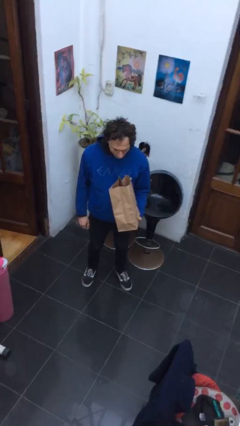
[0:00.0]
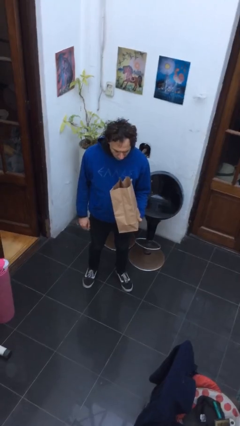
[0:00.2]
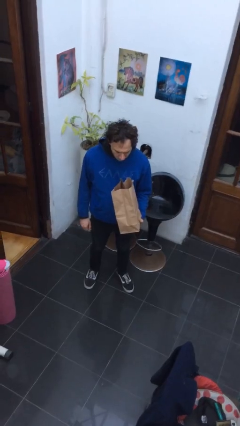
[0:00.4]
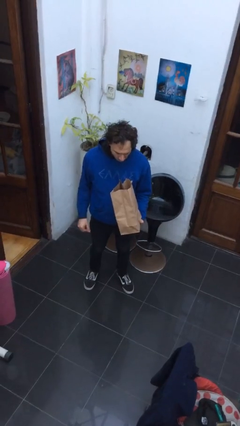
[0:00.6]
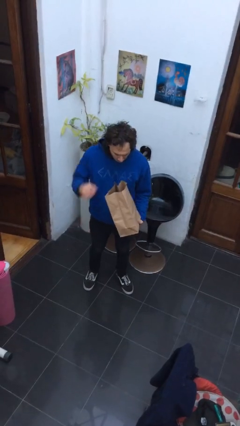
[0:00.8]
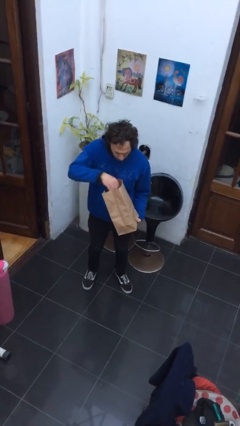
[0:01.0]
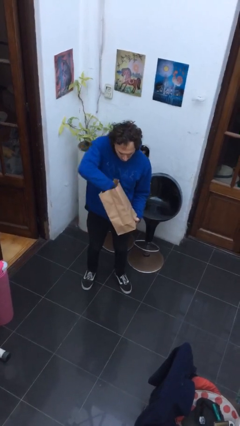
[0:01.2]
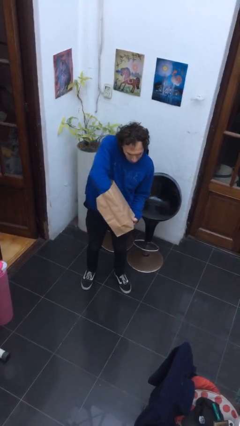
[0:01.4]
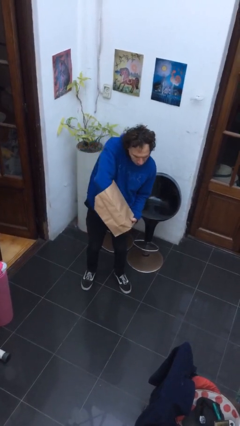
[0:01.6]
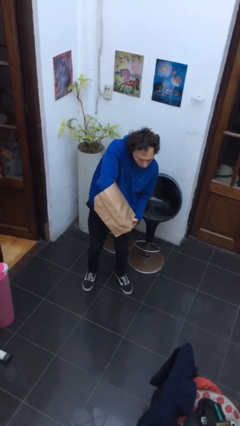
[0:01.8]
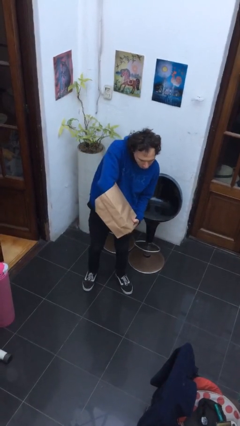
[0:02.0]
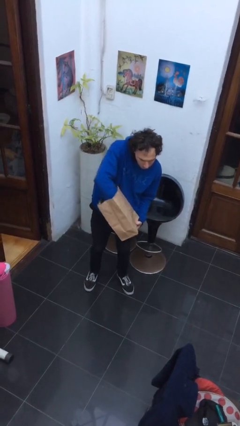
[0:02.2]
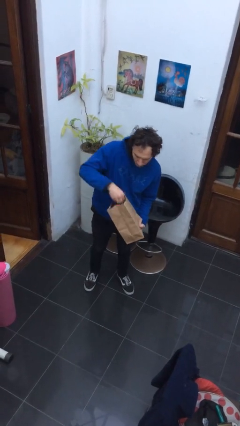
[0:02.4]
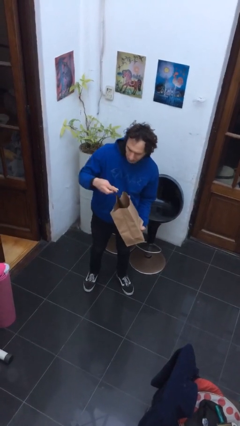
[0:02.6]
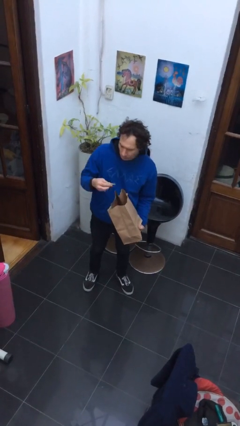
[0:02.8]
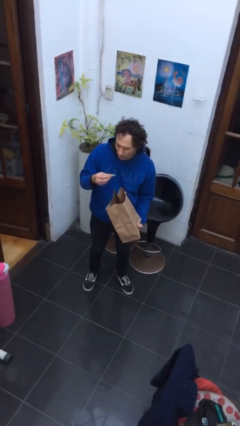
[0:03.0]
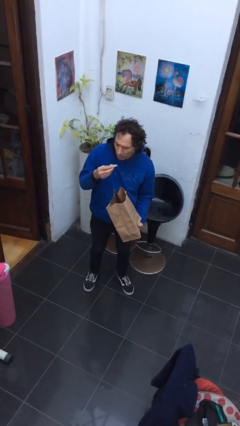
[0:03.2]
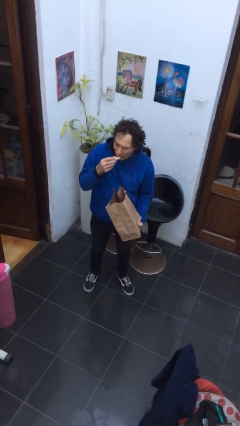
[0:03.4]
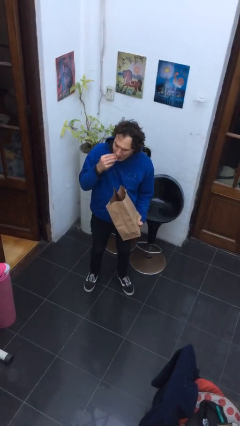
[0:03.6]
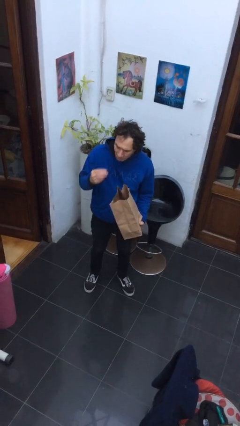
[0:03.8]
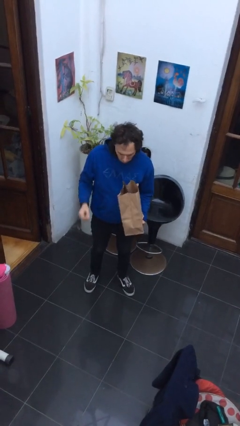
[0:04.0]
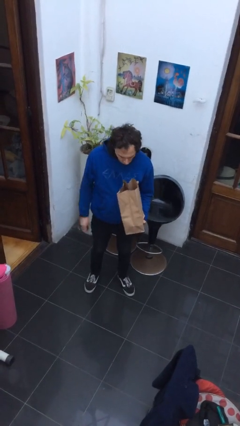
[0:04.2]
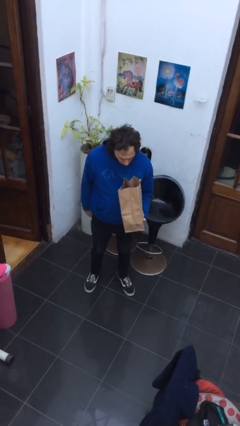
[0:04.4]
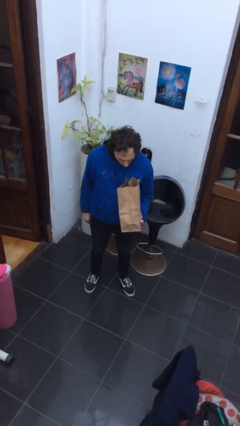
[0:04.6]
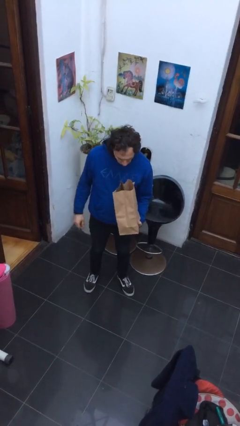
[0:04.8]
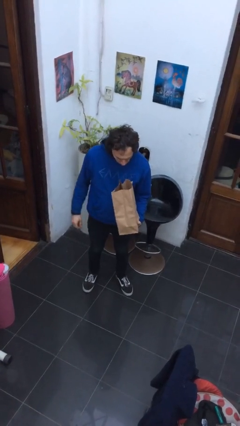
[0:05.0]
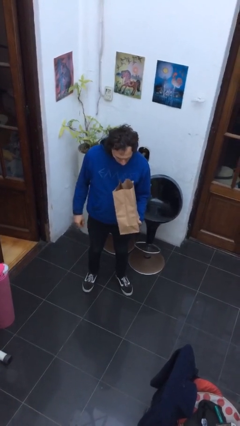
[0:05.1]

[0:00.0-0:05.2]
person eats snack from bag

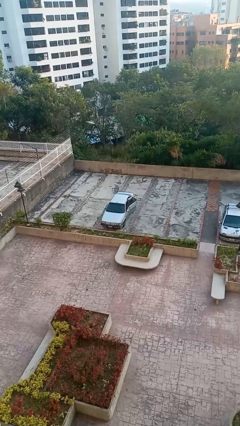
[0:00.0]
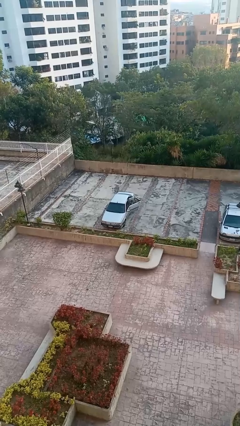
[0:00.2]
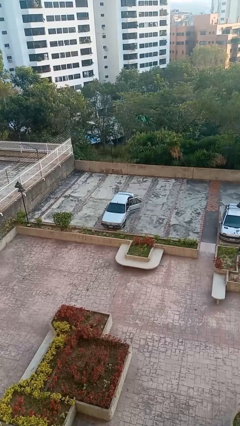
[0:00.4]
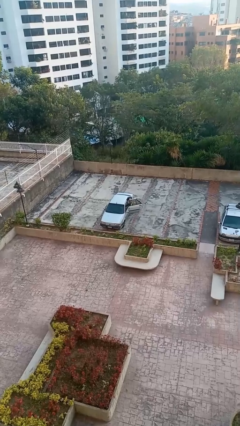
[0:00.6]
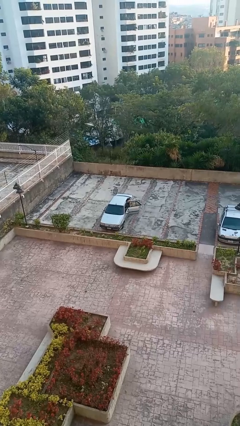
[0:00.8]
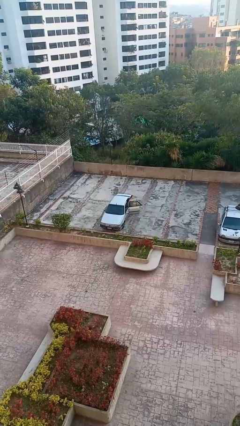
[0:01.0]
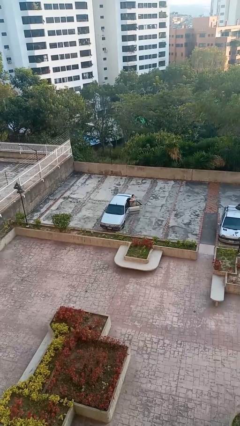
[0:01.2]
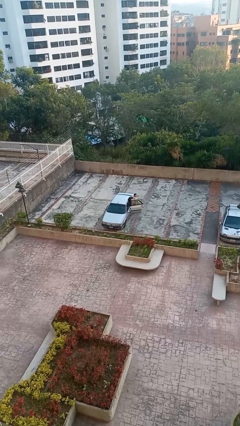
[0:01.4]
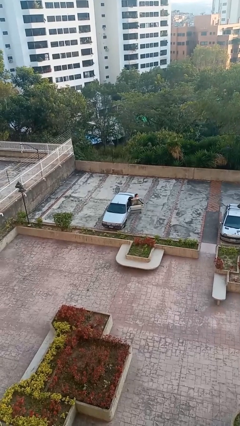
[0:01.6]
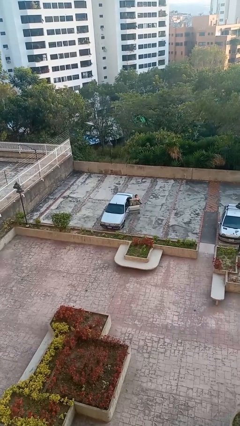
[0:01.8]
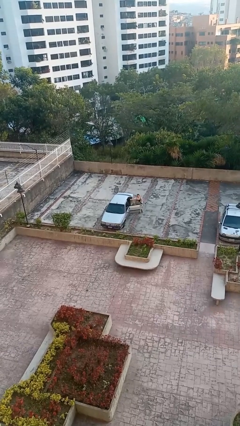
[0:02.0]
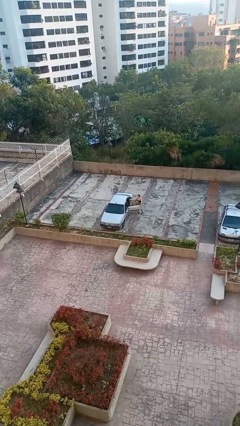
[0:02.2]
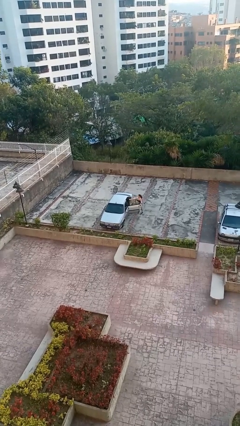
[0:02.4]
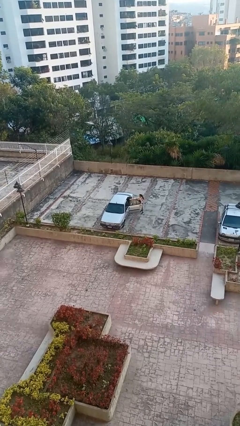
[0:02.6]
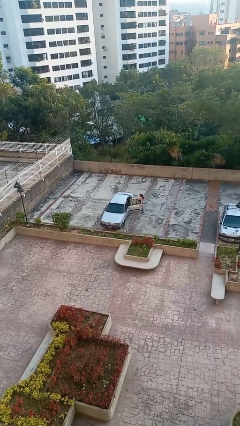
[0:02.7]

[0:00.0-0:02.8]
car drops off person

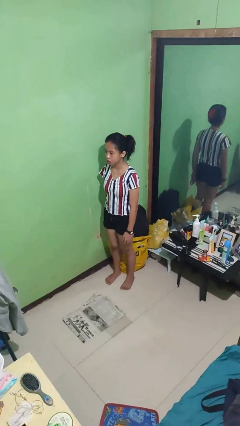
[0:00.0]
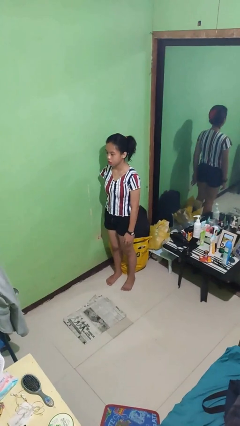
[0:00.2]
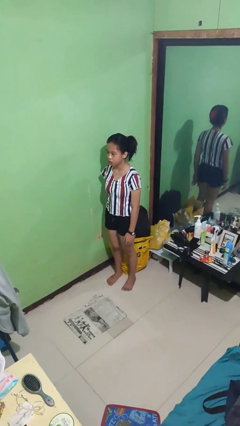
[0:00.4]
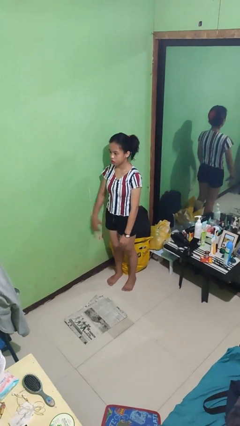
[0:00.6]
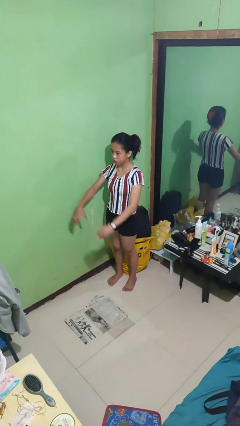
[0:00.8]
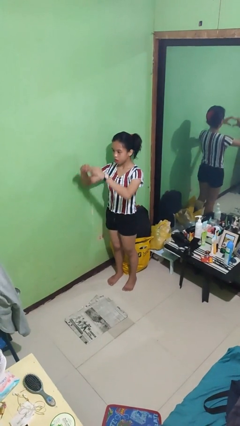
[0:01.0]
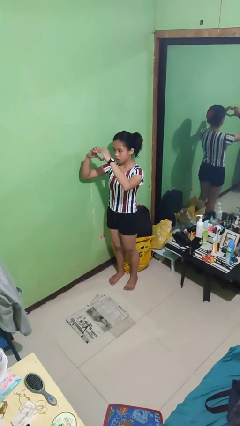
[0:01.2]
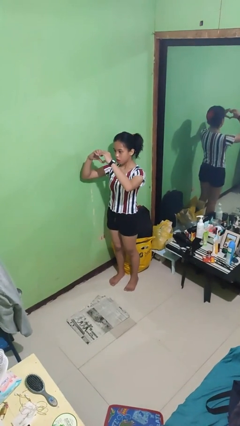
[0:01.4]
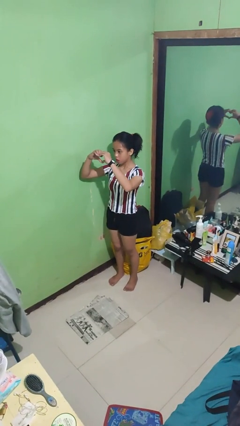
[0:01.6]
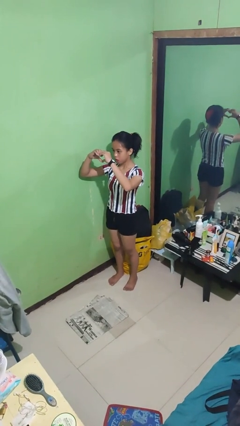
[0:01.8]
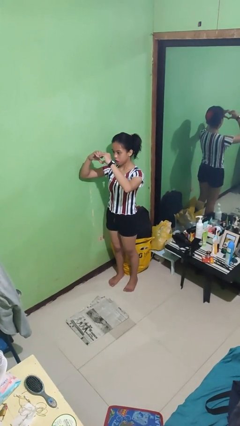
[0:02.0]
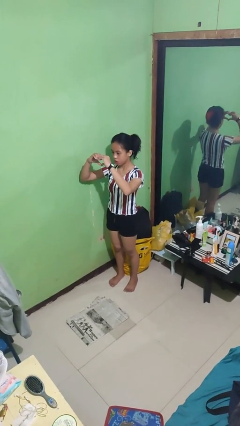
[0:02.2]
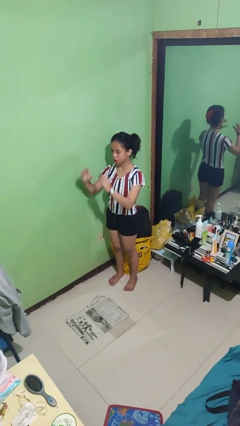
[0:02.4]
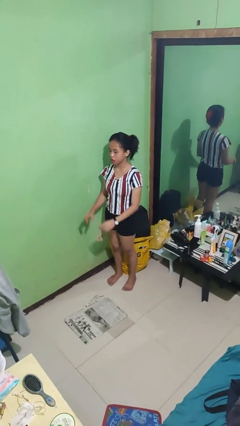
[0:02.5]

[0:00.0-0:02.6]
person gestures heart

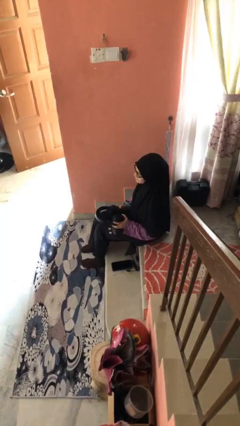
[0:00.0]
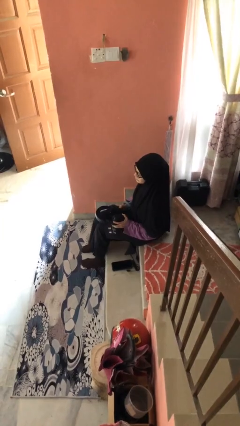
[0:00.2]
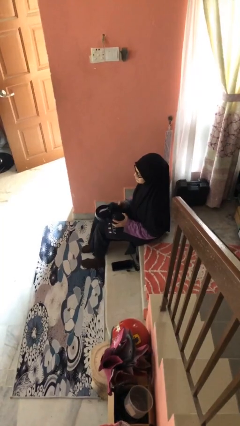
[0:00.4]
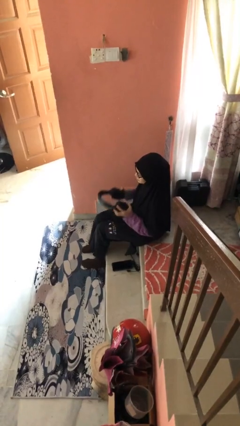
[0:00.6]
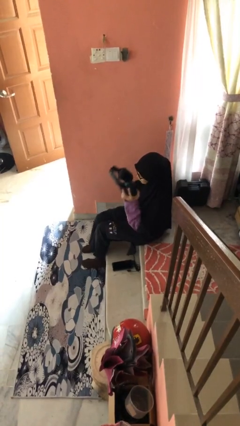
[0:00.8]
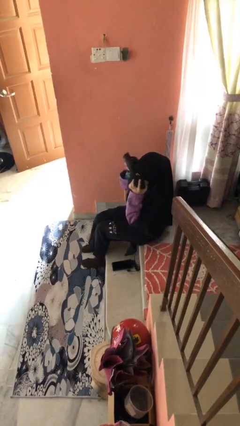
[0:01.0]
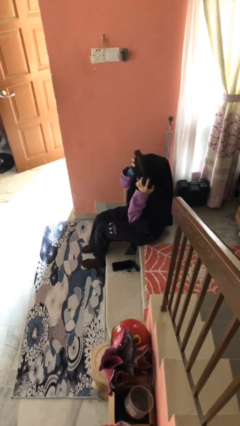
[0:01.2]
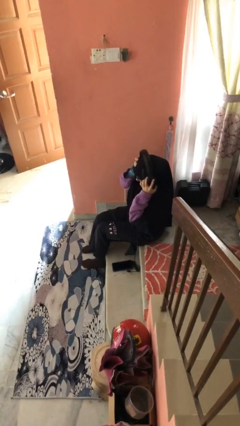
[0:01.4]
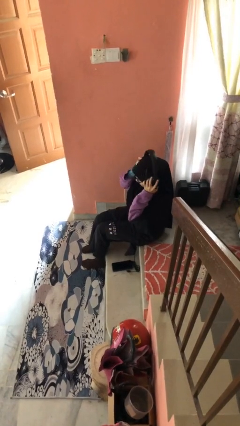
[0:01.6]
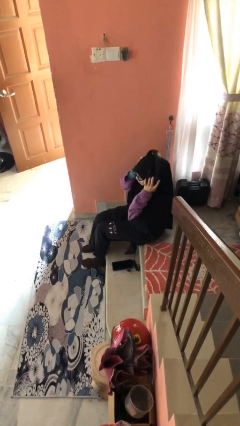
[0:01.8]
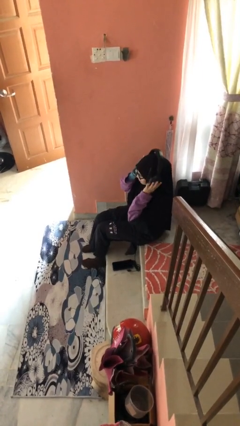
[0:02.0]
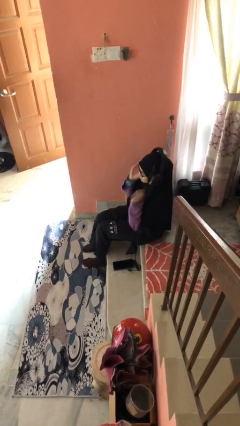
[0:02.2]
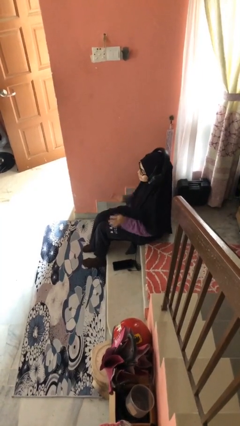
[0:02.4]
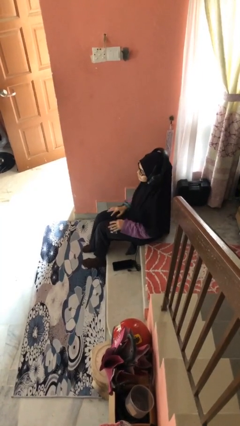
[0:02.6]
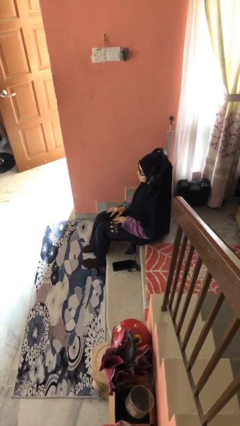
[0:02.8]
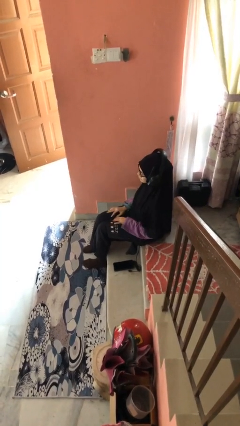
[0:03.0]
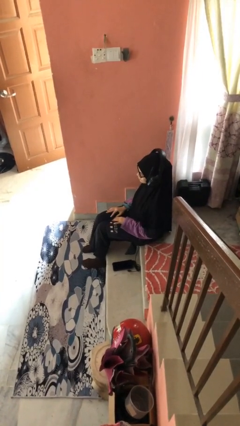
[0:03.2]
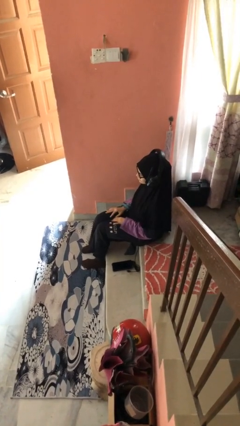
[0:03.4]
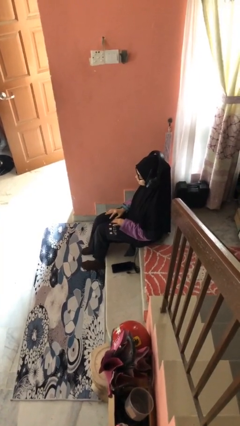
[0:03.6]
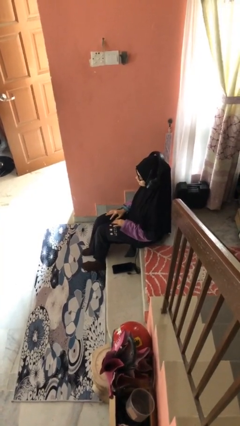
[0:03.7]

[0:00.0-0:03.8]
person puts on headphones

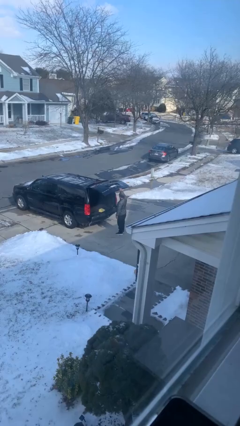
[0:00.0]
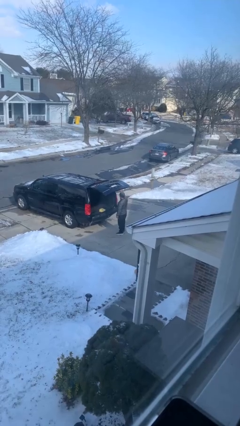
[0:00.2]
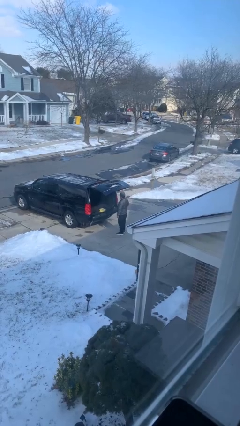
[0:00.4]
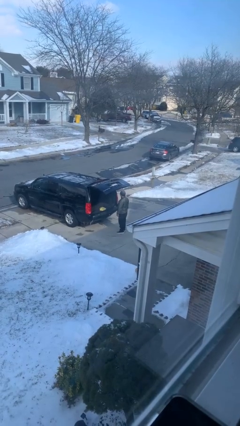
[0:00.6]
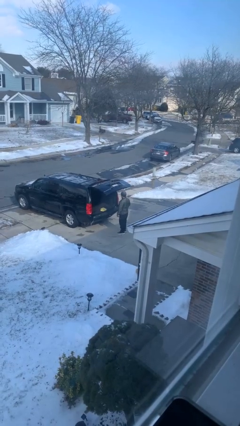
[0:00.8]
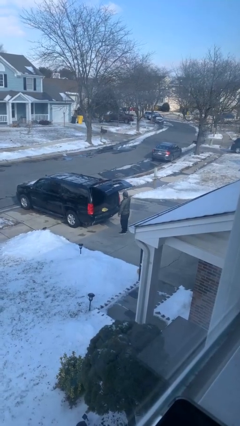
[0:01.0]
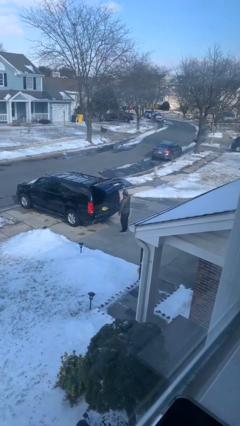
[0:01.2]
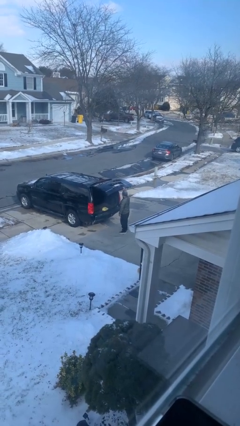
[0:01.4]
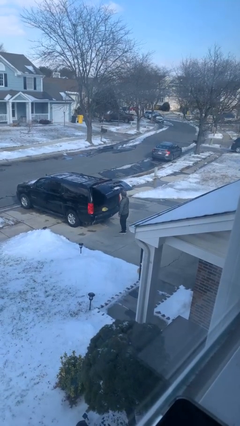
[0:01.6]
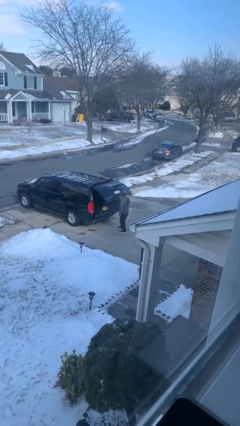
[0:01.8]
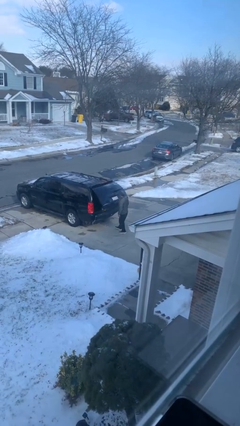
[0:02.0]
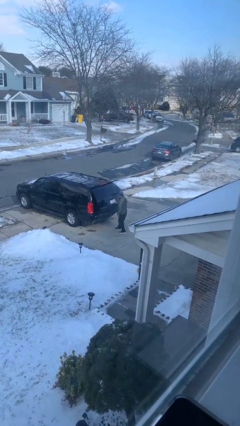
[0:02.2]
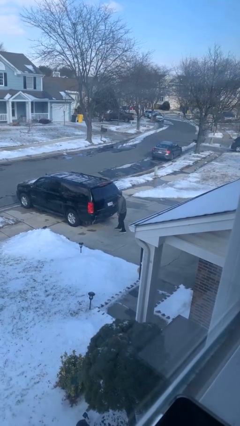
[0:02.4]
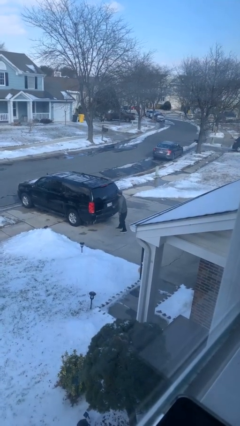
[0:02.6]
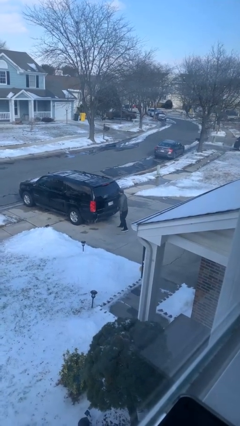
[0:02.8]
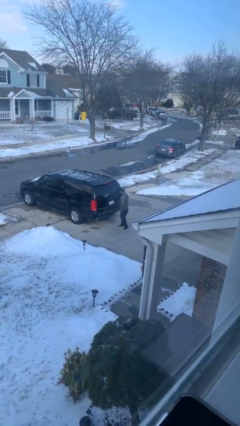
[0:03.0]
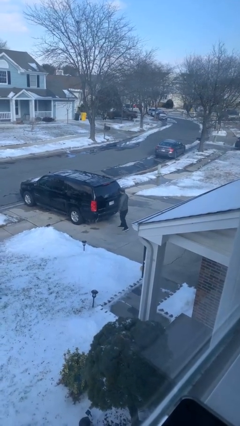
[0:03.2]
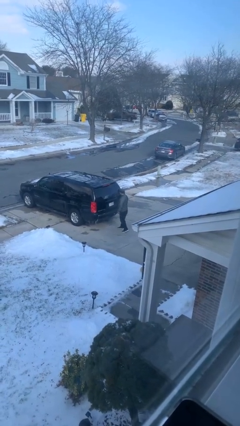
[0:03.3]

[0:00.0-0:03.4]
person closes car trunk
